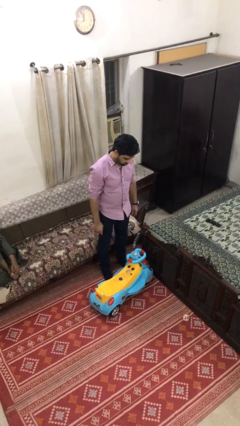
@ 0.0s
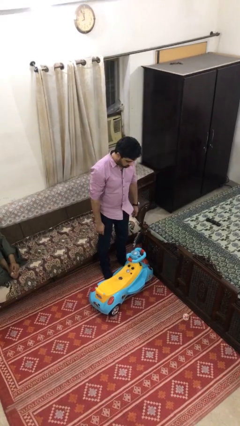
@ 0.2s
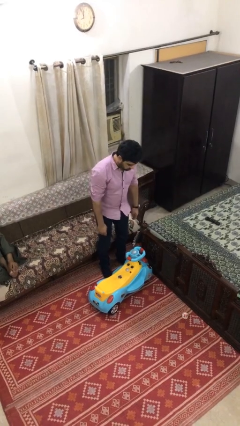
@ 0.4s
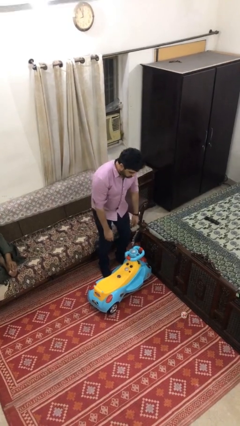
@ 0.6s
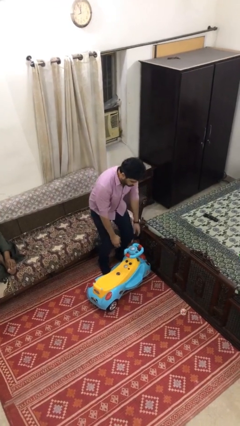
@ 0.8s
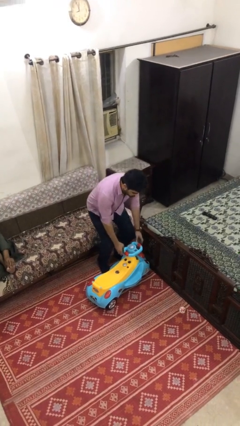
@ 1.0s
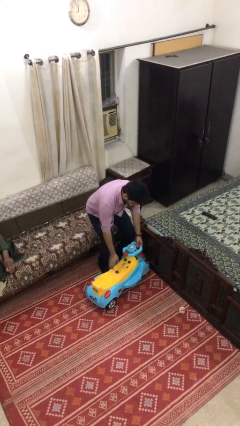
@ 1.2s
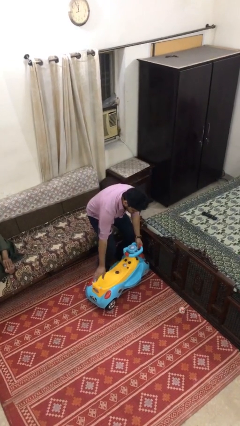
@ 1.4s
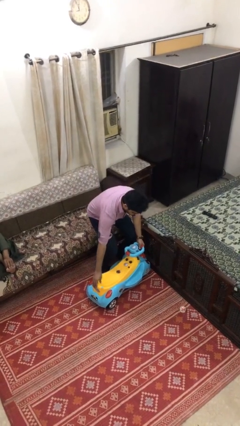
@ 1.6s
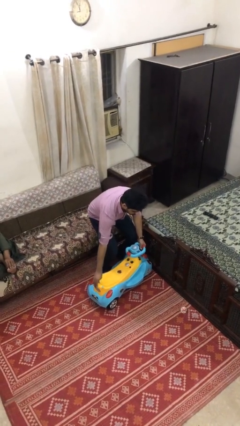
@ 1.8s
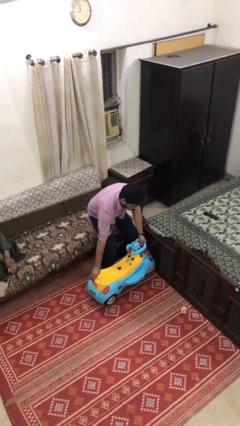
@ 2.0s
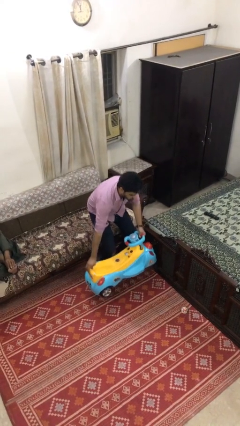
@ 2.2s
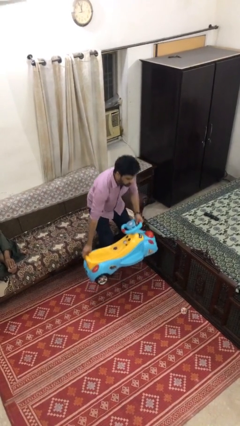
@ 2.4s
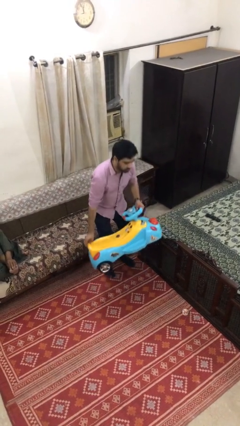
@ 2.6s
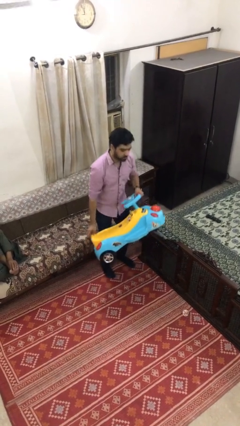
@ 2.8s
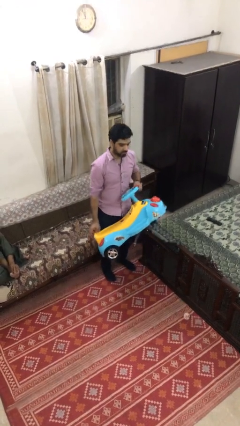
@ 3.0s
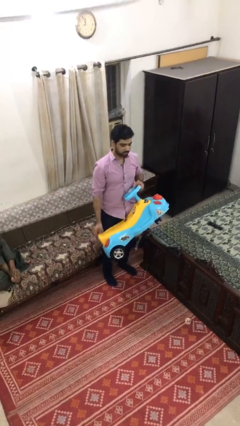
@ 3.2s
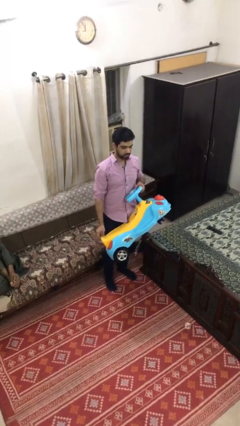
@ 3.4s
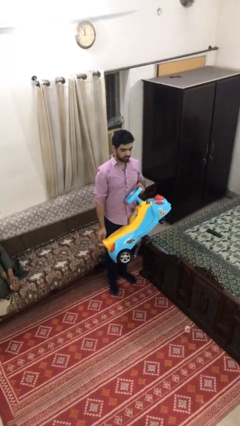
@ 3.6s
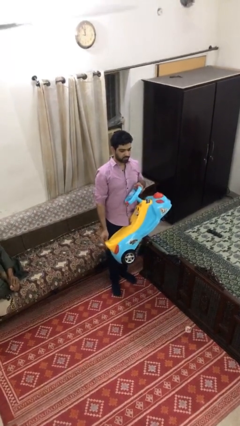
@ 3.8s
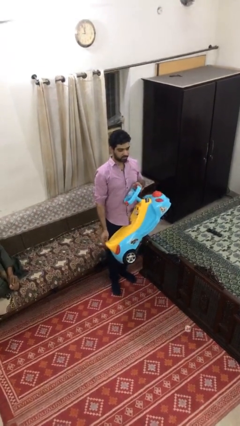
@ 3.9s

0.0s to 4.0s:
person picks up object from floor

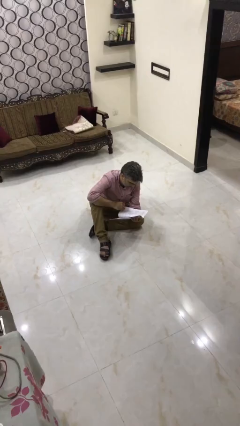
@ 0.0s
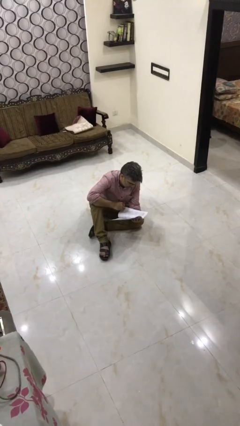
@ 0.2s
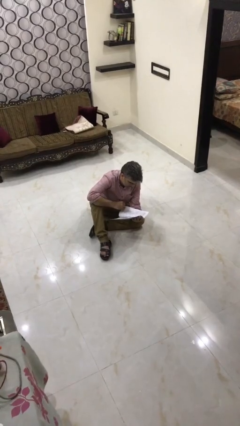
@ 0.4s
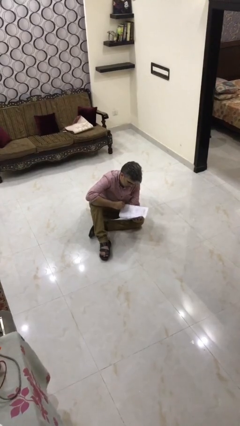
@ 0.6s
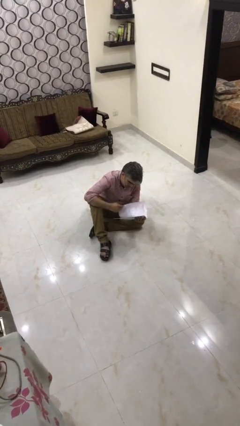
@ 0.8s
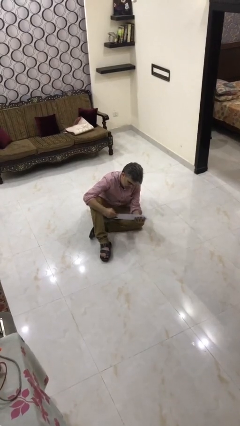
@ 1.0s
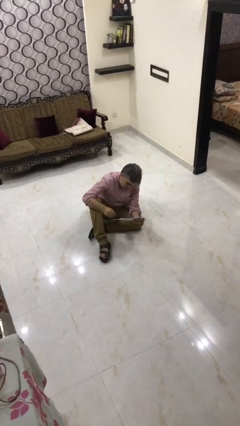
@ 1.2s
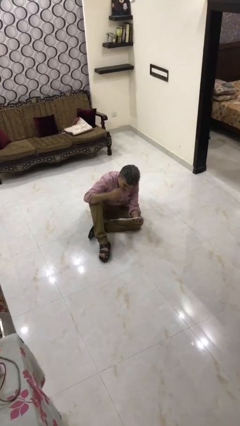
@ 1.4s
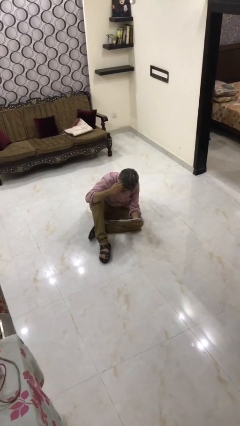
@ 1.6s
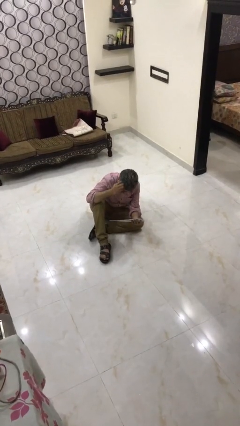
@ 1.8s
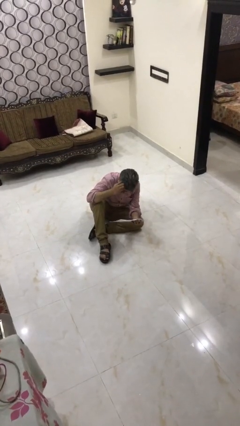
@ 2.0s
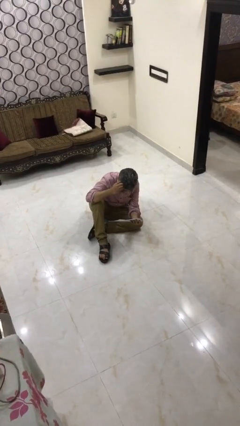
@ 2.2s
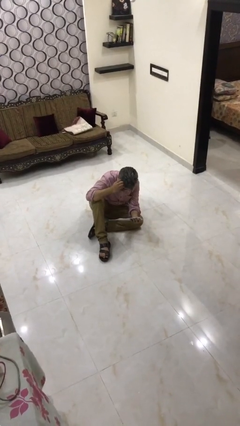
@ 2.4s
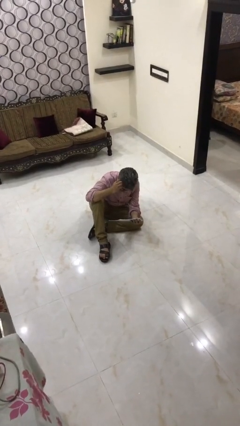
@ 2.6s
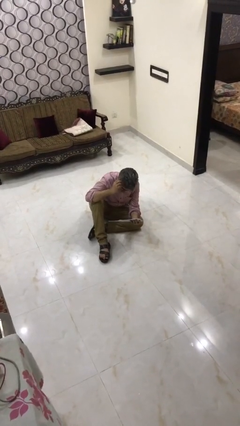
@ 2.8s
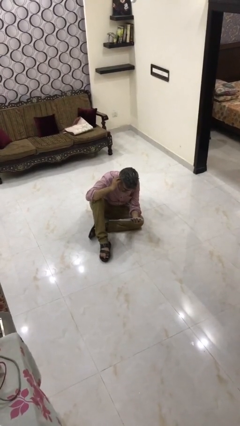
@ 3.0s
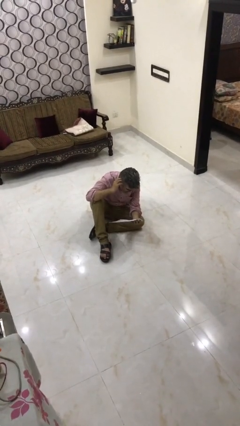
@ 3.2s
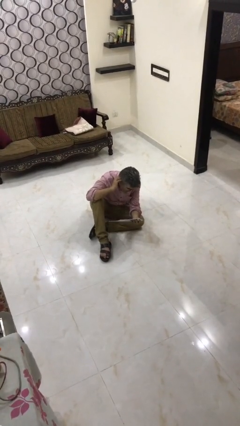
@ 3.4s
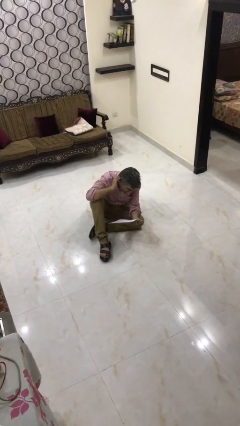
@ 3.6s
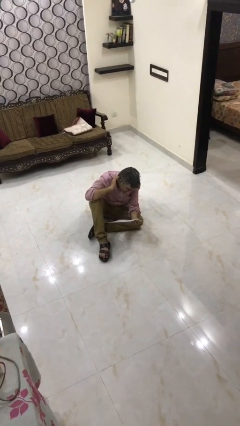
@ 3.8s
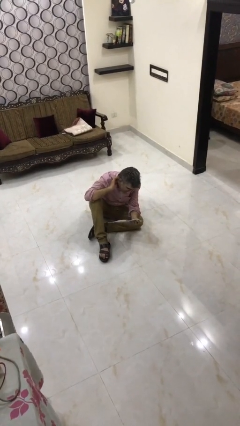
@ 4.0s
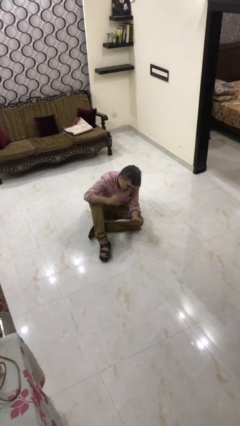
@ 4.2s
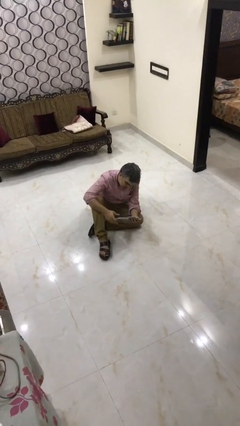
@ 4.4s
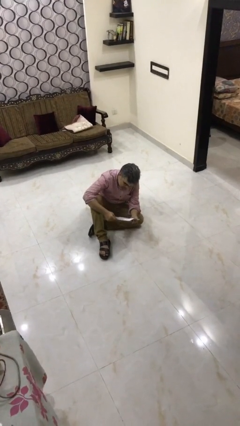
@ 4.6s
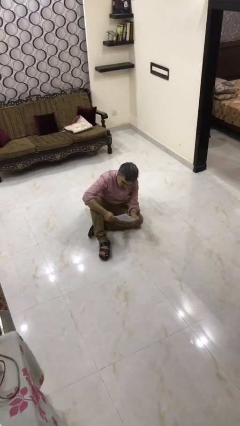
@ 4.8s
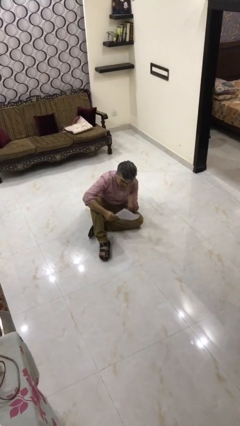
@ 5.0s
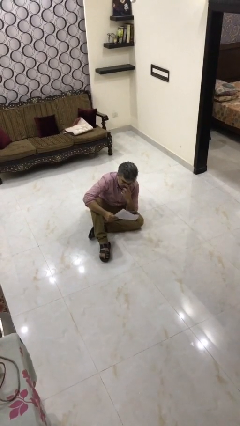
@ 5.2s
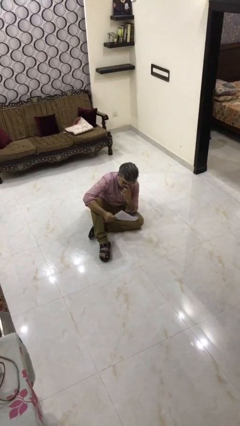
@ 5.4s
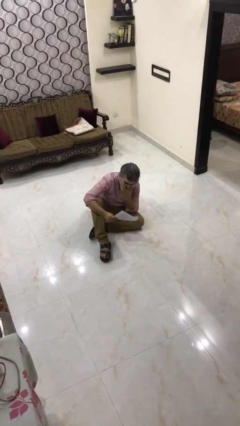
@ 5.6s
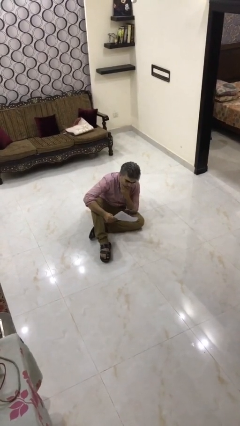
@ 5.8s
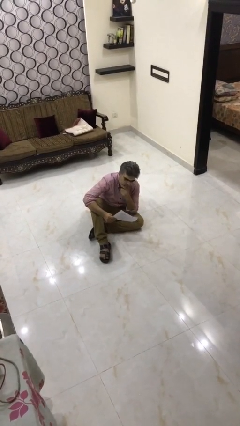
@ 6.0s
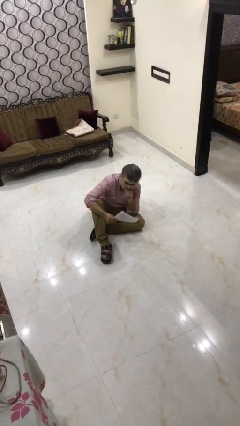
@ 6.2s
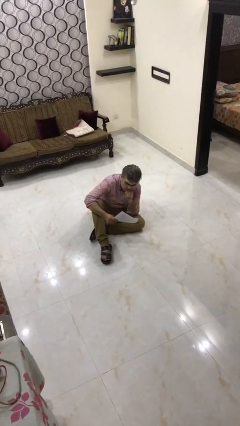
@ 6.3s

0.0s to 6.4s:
person reads document

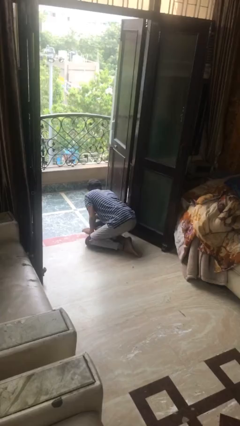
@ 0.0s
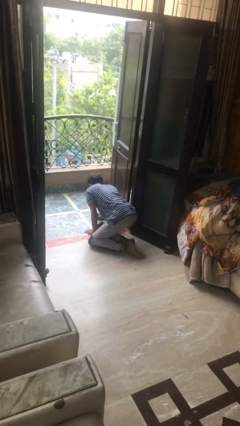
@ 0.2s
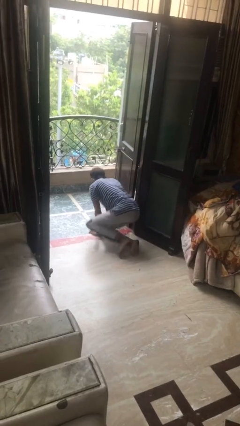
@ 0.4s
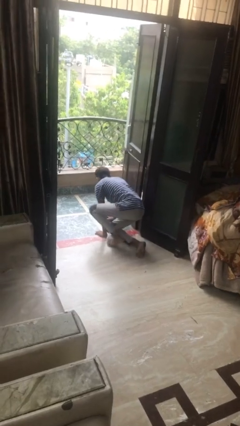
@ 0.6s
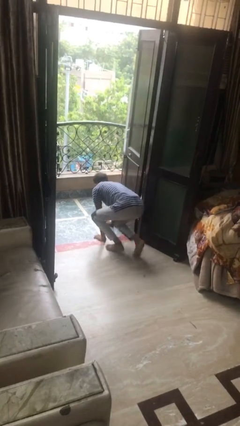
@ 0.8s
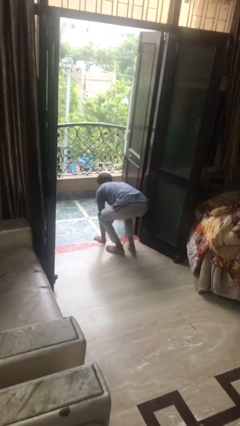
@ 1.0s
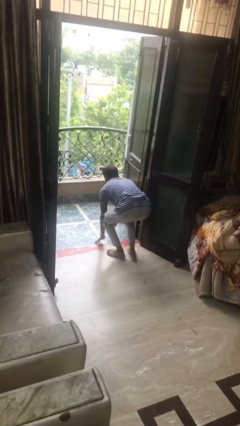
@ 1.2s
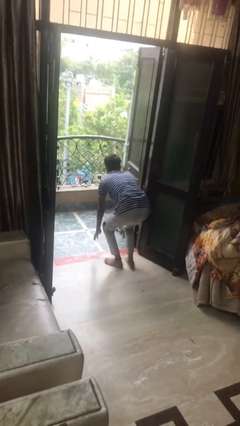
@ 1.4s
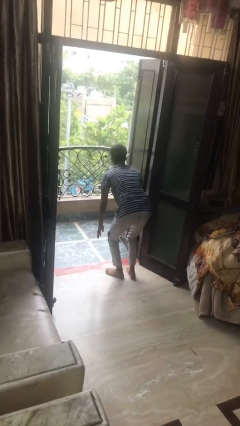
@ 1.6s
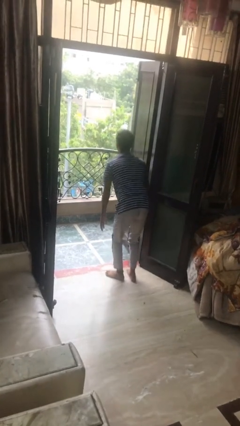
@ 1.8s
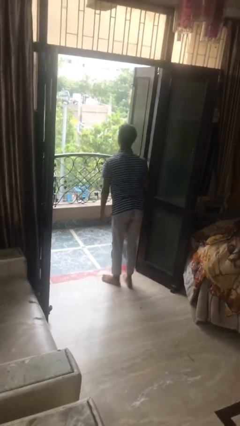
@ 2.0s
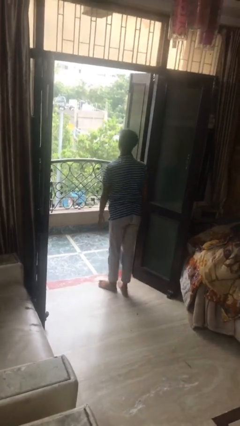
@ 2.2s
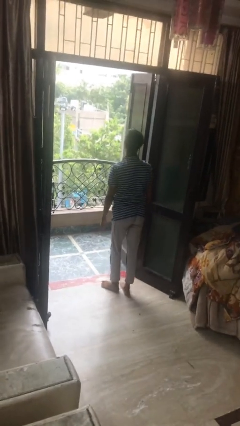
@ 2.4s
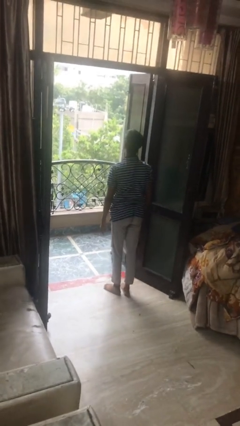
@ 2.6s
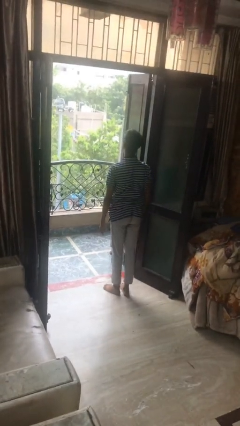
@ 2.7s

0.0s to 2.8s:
person stands up from floor

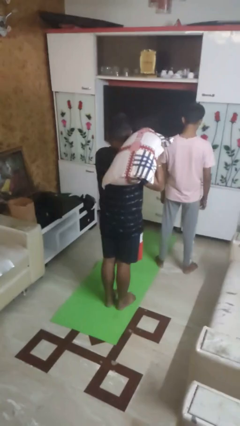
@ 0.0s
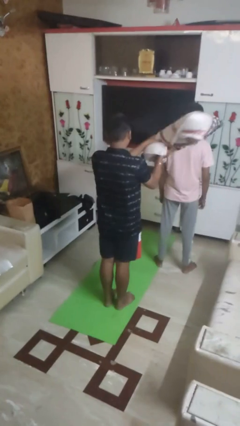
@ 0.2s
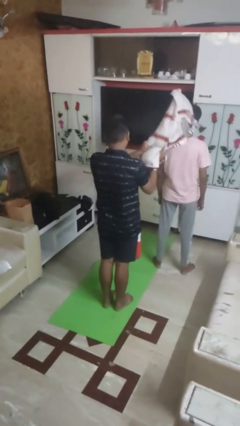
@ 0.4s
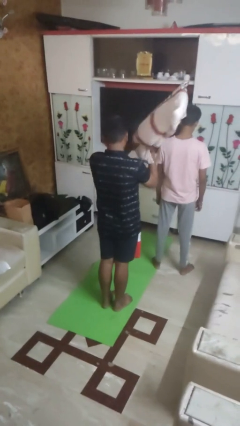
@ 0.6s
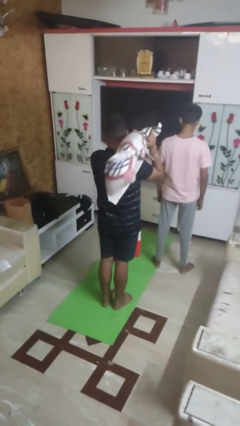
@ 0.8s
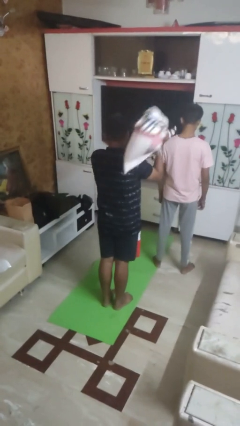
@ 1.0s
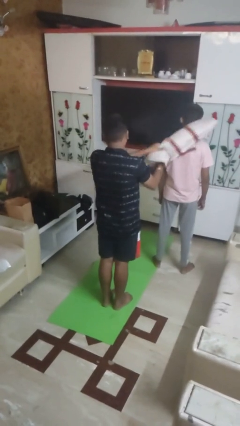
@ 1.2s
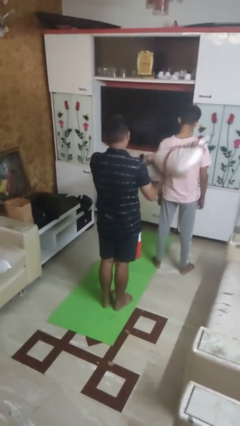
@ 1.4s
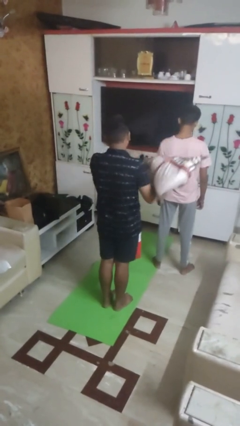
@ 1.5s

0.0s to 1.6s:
person hits person with pillow

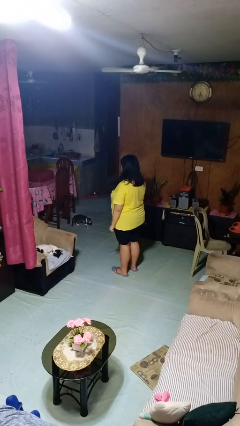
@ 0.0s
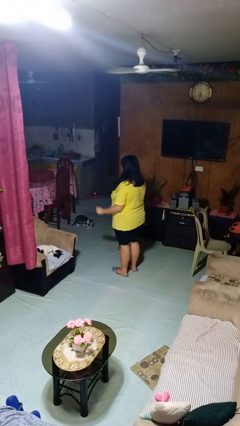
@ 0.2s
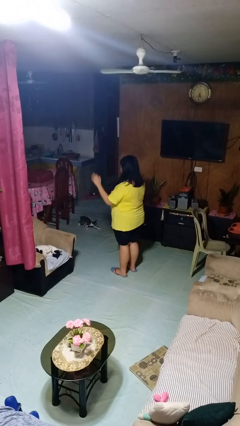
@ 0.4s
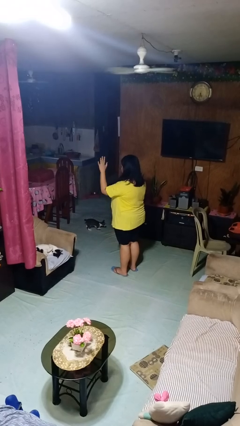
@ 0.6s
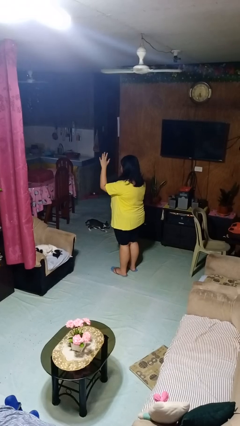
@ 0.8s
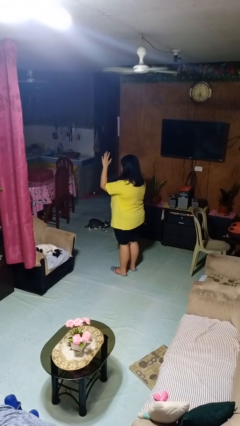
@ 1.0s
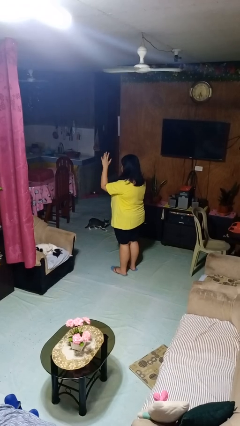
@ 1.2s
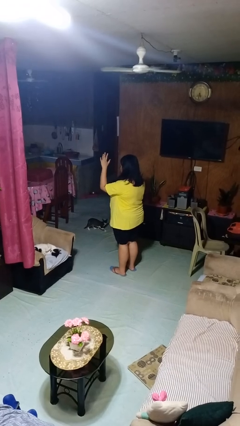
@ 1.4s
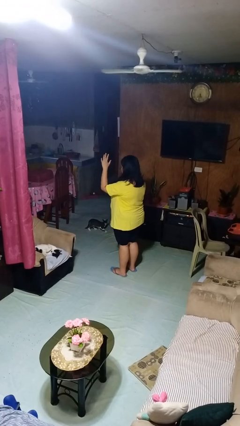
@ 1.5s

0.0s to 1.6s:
person gestures raise hand

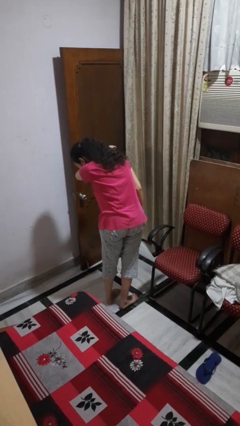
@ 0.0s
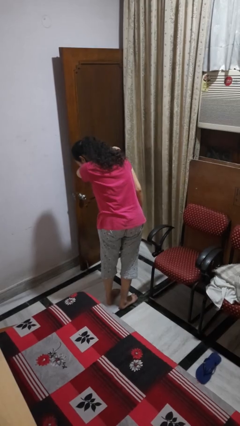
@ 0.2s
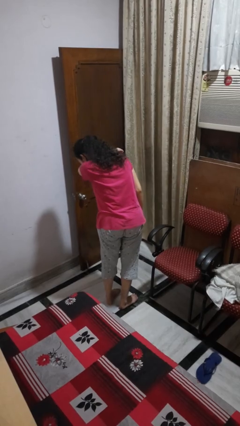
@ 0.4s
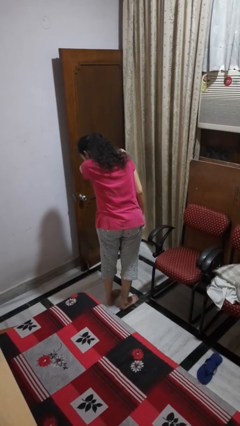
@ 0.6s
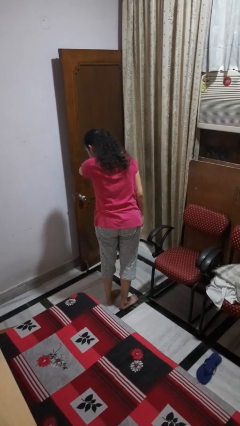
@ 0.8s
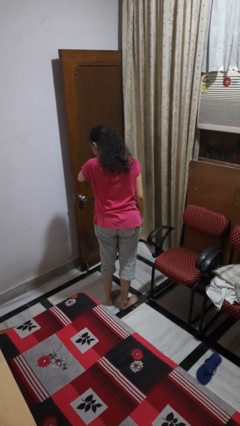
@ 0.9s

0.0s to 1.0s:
person sneezes into arm
